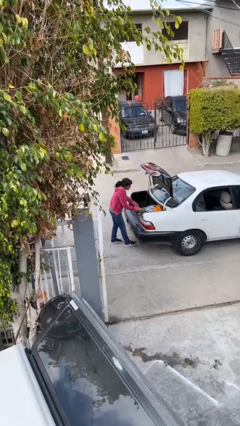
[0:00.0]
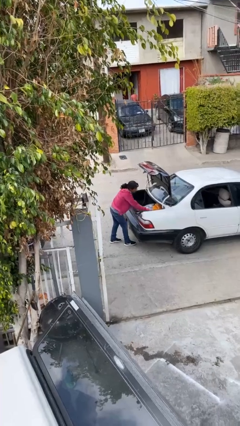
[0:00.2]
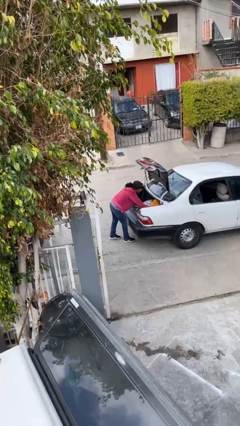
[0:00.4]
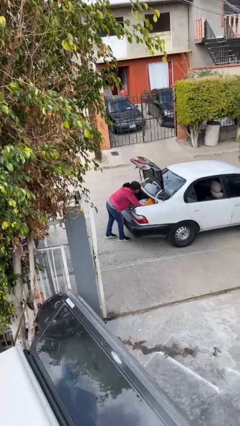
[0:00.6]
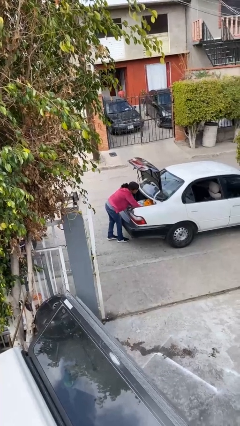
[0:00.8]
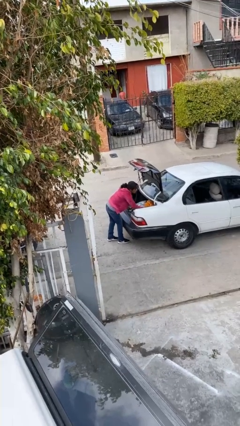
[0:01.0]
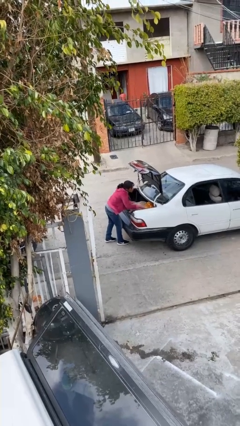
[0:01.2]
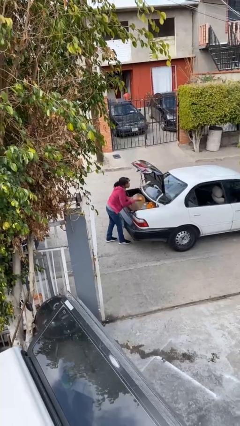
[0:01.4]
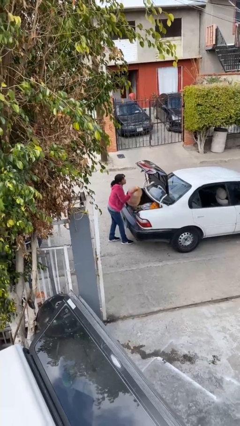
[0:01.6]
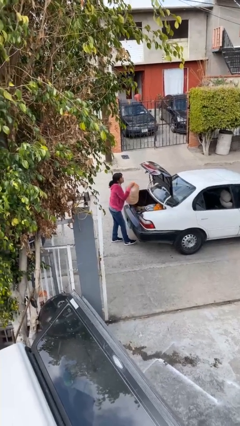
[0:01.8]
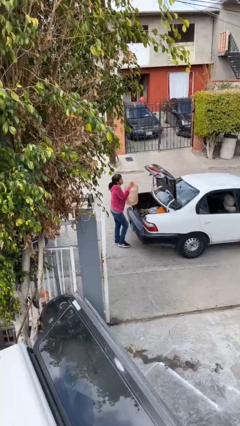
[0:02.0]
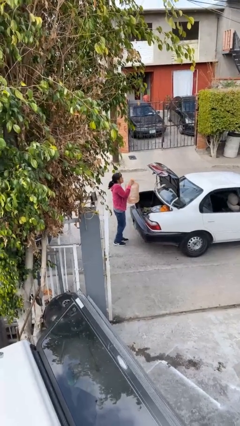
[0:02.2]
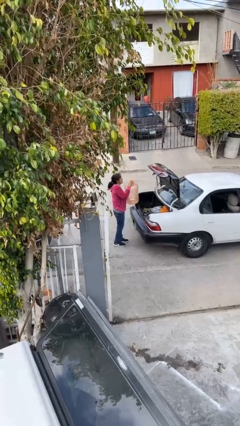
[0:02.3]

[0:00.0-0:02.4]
person unloads car

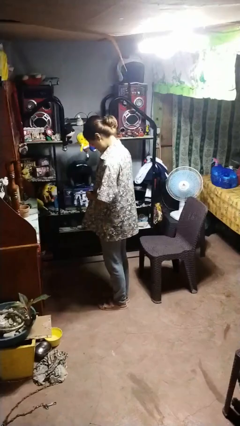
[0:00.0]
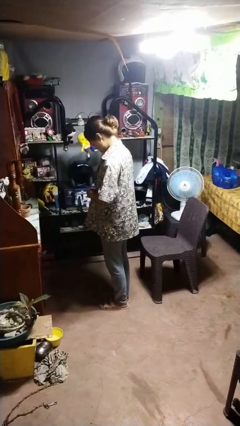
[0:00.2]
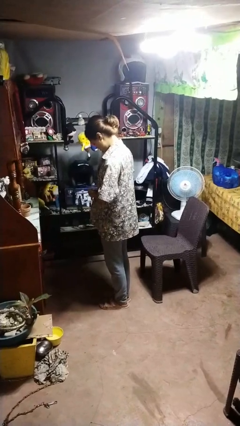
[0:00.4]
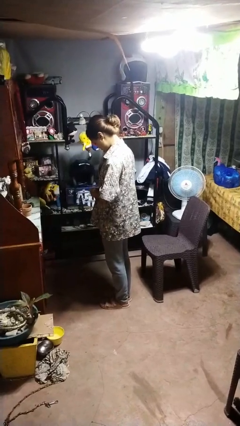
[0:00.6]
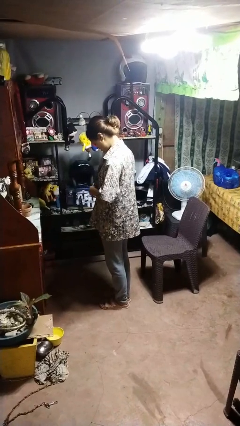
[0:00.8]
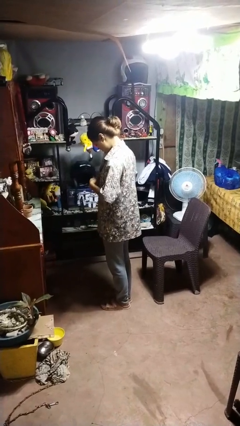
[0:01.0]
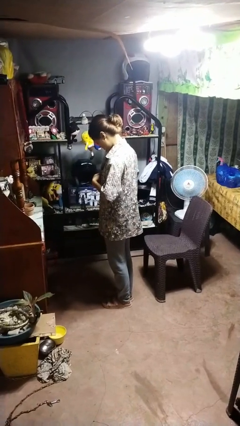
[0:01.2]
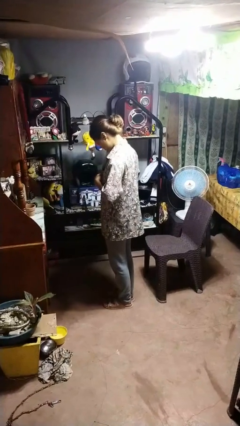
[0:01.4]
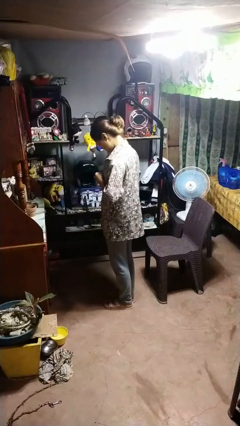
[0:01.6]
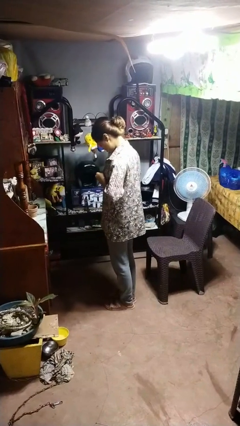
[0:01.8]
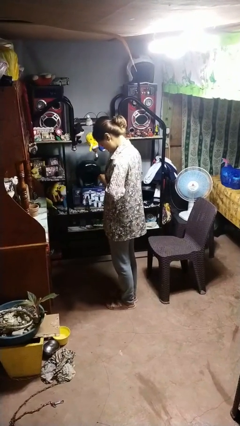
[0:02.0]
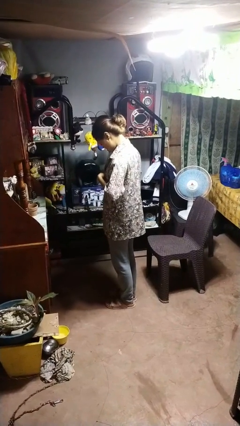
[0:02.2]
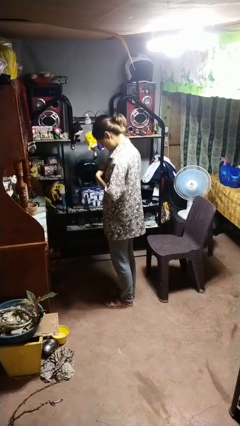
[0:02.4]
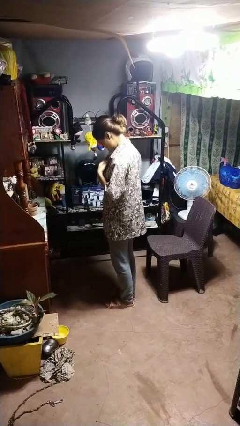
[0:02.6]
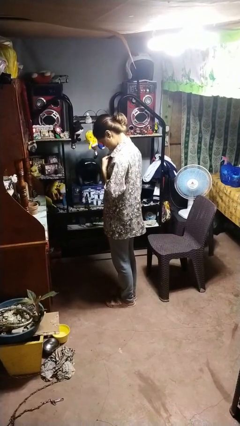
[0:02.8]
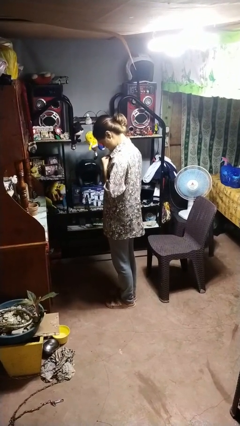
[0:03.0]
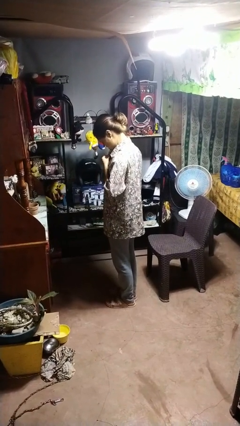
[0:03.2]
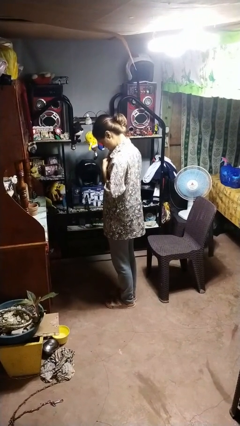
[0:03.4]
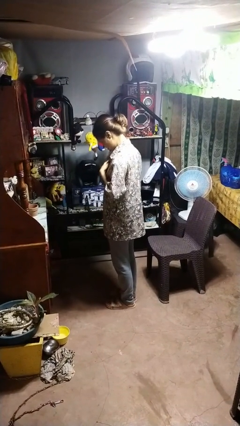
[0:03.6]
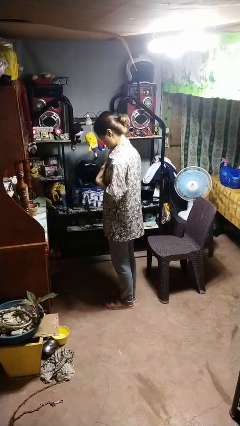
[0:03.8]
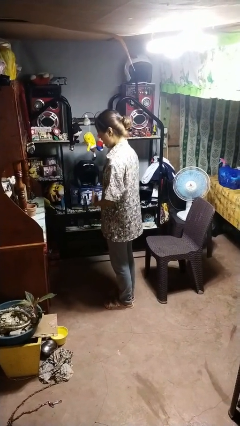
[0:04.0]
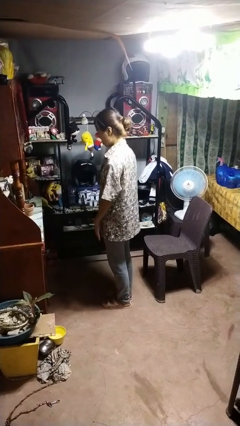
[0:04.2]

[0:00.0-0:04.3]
person buttons shirt

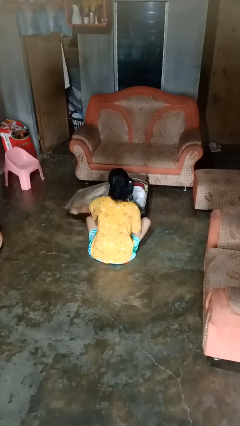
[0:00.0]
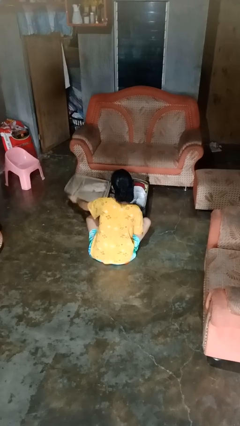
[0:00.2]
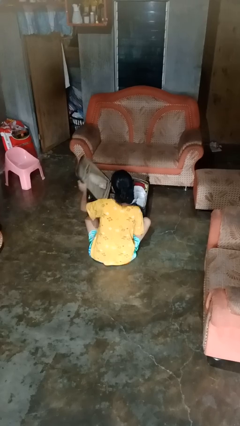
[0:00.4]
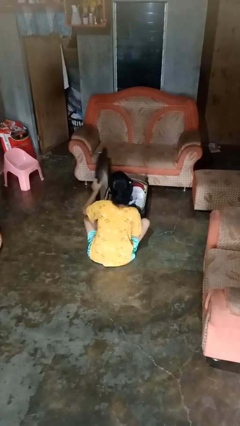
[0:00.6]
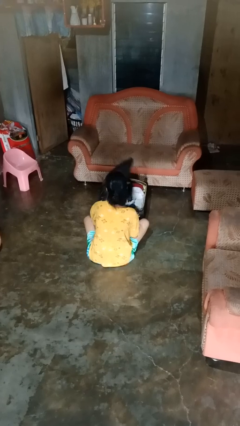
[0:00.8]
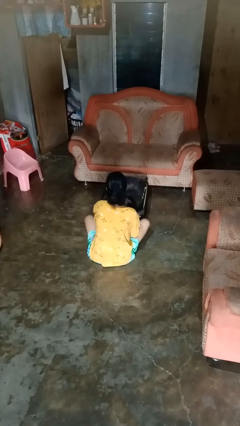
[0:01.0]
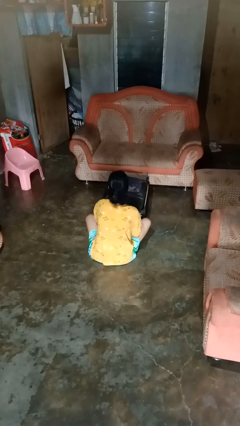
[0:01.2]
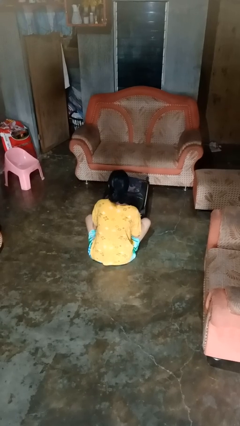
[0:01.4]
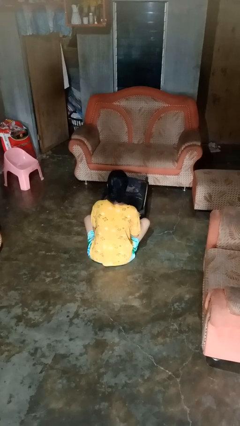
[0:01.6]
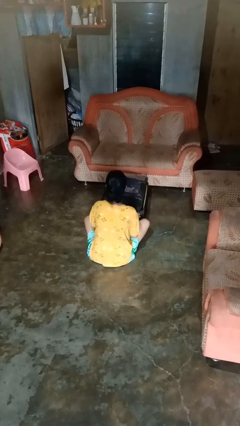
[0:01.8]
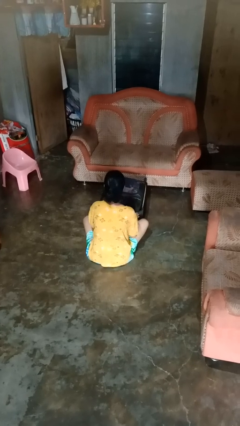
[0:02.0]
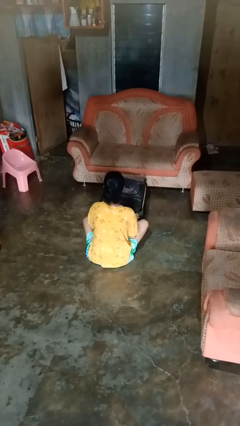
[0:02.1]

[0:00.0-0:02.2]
person closes suitcase

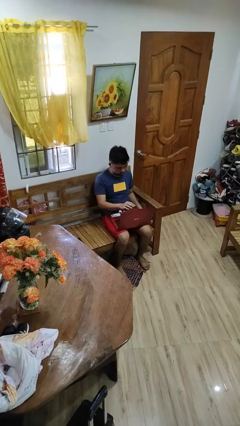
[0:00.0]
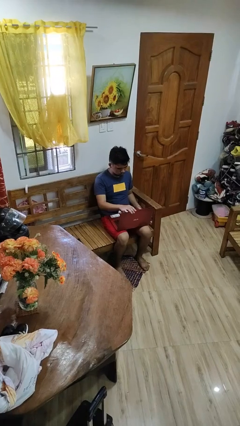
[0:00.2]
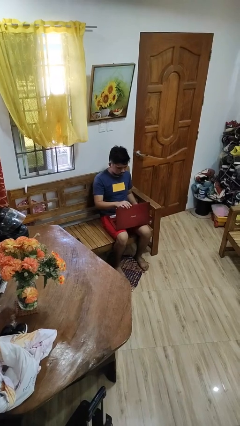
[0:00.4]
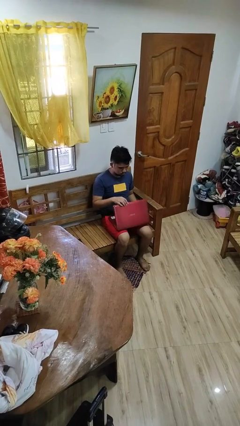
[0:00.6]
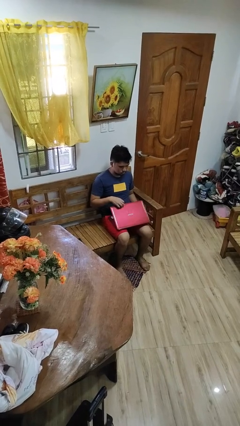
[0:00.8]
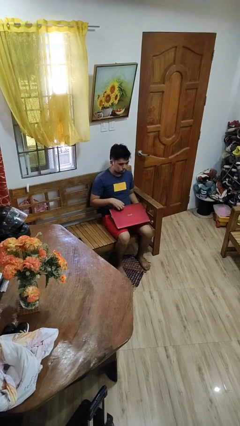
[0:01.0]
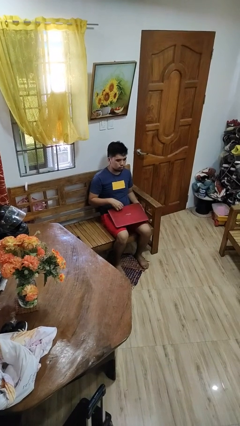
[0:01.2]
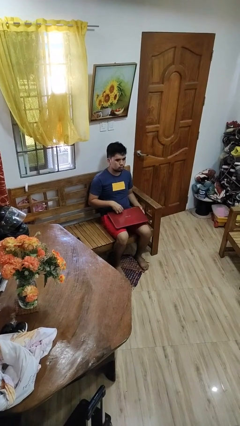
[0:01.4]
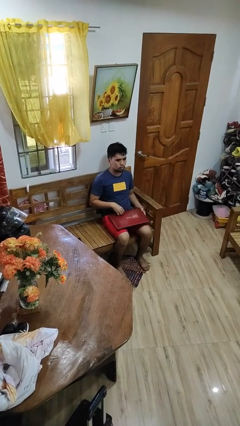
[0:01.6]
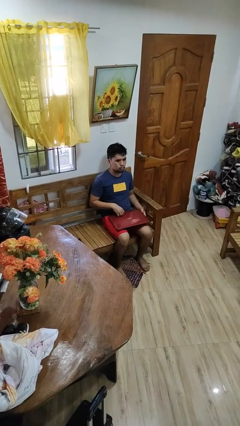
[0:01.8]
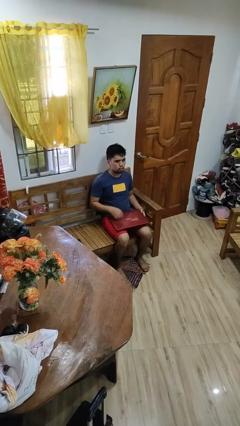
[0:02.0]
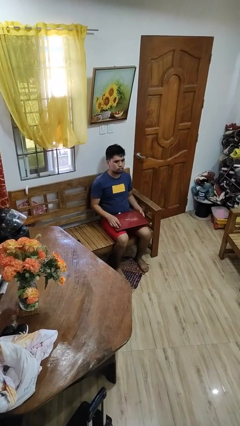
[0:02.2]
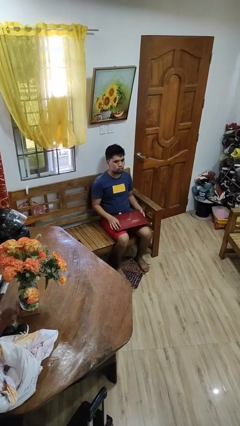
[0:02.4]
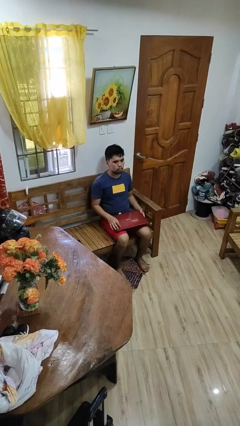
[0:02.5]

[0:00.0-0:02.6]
person closes laptop

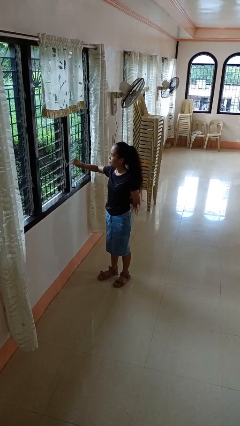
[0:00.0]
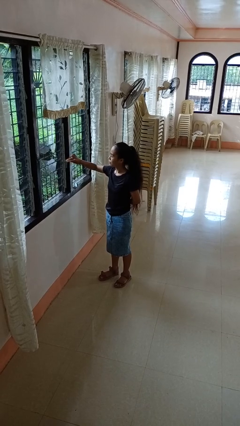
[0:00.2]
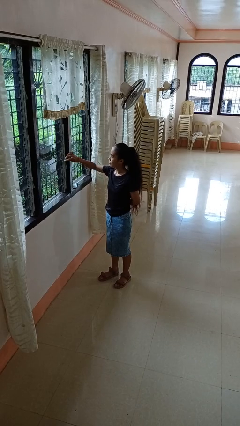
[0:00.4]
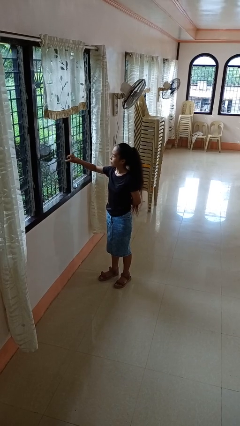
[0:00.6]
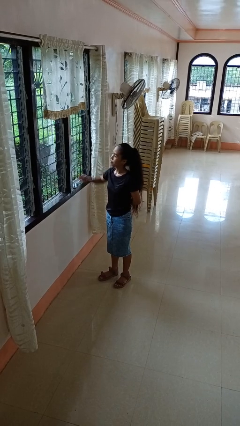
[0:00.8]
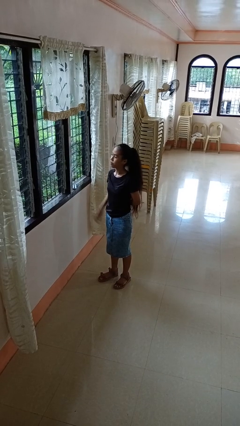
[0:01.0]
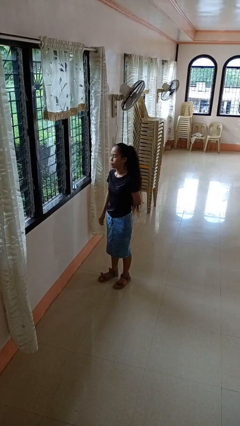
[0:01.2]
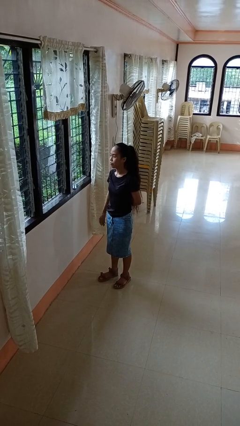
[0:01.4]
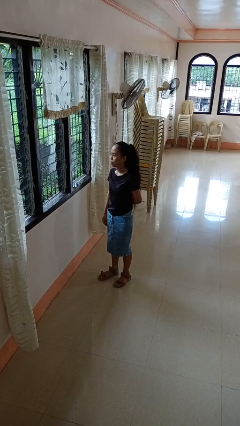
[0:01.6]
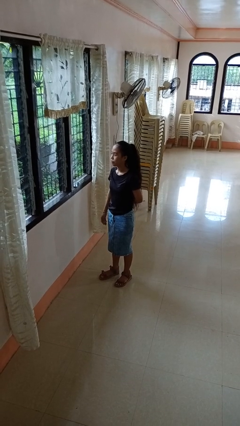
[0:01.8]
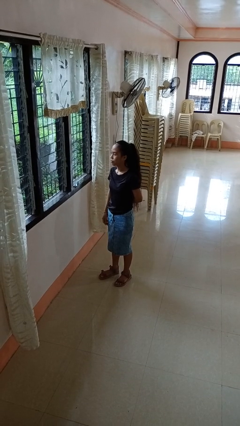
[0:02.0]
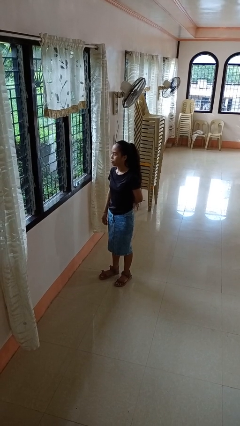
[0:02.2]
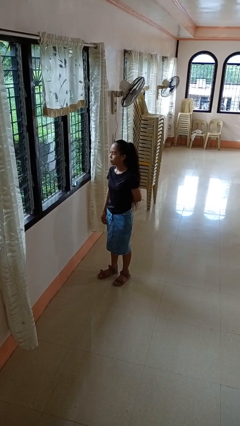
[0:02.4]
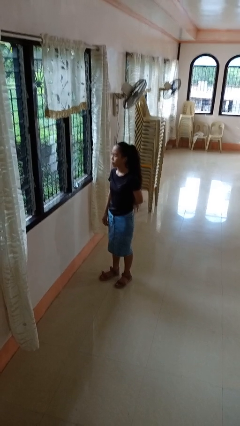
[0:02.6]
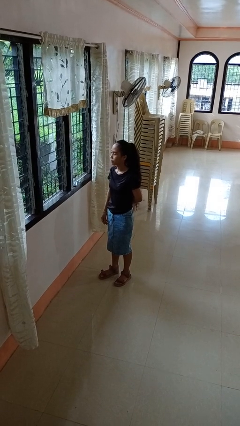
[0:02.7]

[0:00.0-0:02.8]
person closes home window

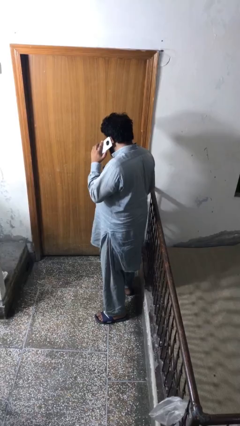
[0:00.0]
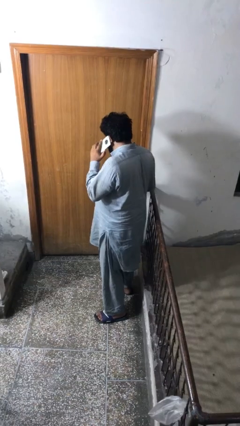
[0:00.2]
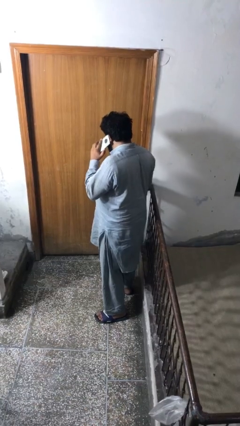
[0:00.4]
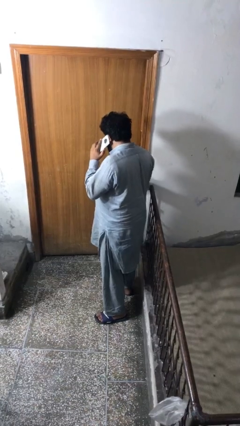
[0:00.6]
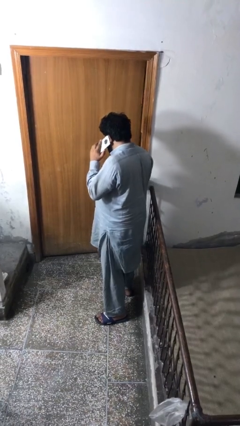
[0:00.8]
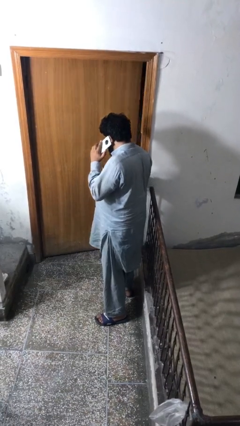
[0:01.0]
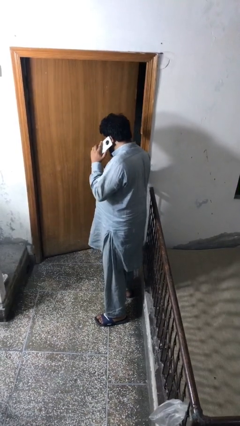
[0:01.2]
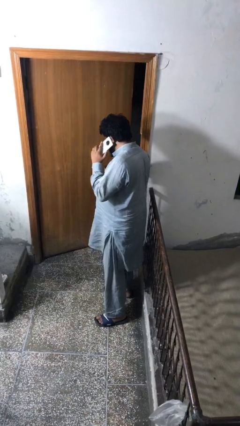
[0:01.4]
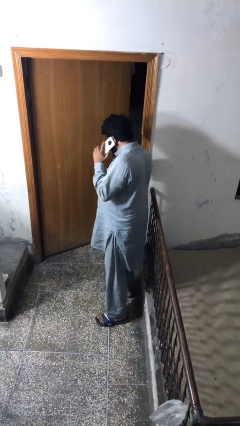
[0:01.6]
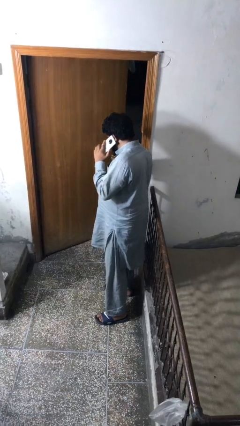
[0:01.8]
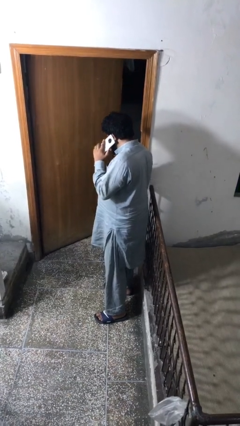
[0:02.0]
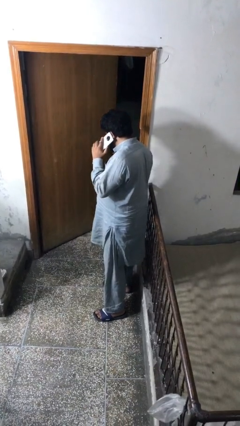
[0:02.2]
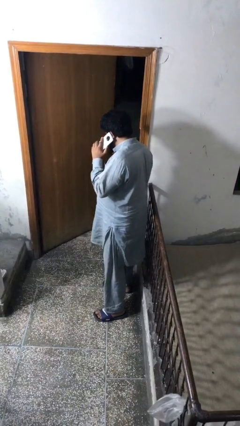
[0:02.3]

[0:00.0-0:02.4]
person opens facility door

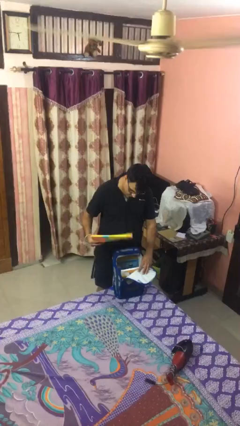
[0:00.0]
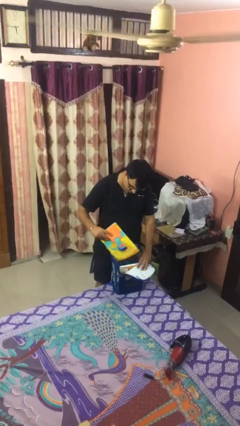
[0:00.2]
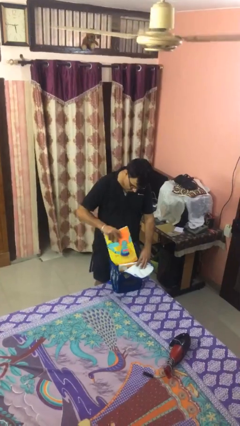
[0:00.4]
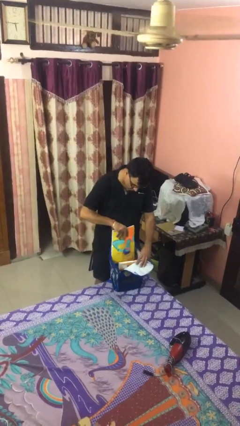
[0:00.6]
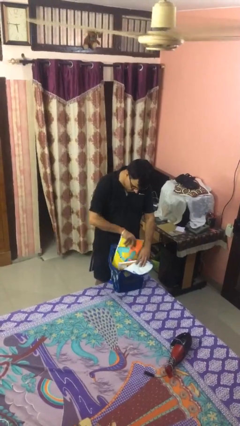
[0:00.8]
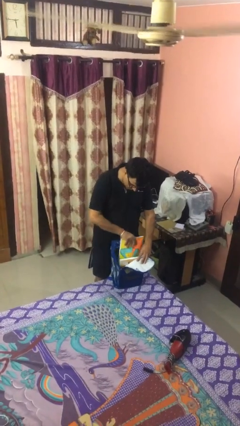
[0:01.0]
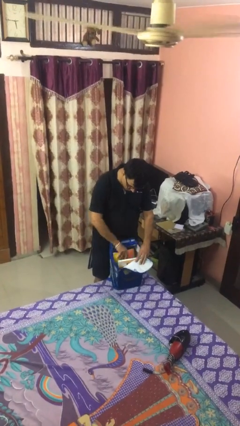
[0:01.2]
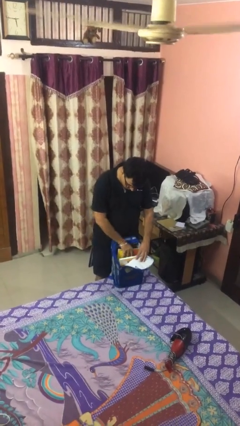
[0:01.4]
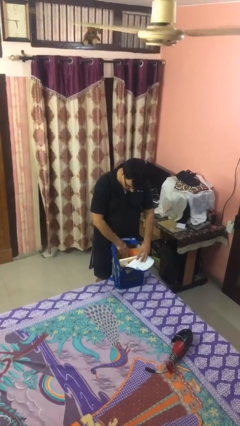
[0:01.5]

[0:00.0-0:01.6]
person puts object into backpack
